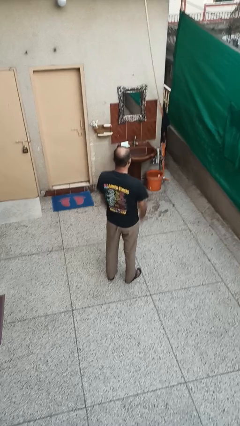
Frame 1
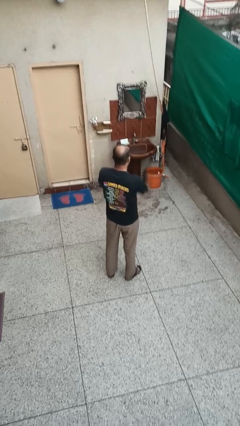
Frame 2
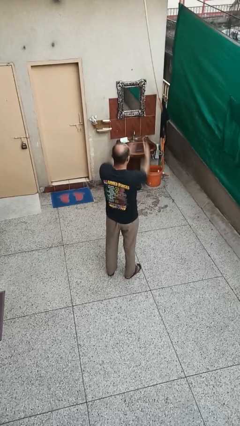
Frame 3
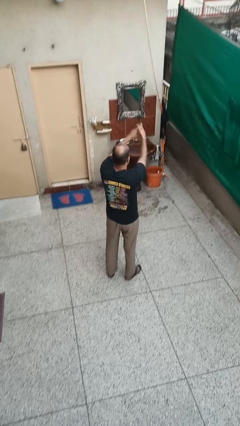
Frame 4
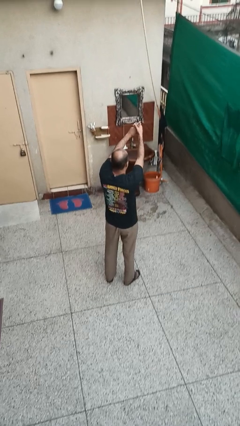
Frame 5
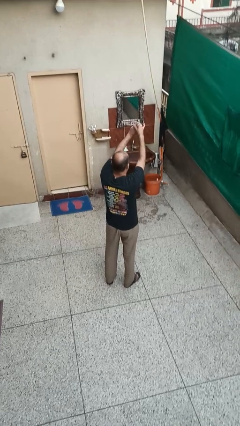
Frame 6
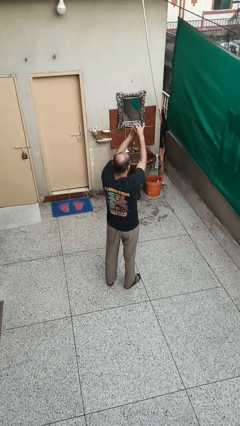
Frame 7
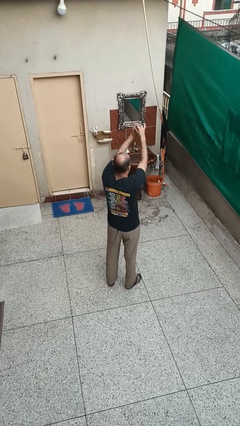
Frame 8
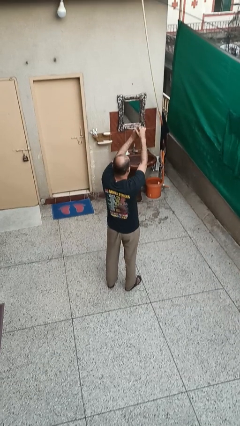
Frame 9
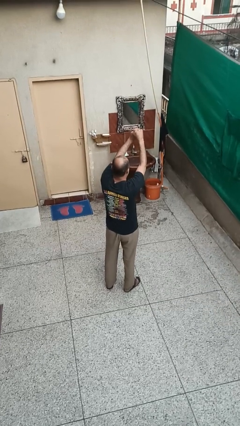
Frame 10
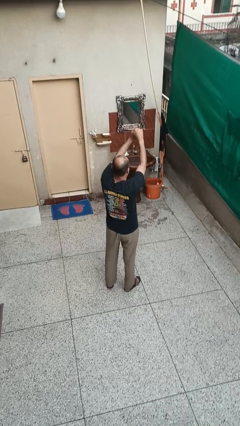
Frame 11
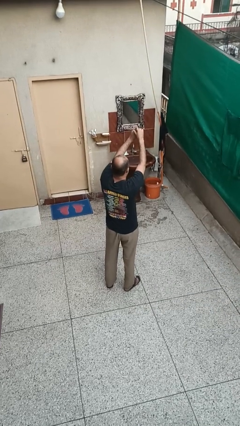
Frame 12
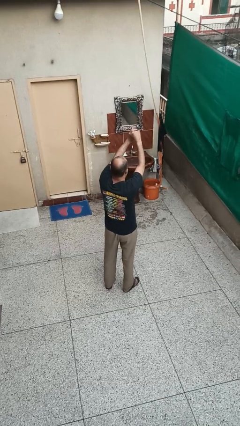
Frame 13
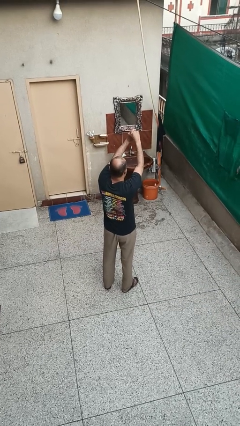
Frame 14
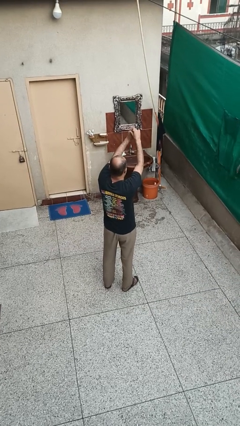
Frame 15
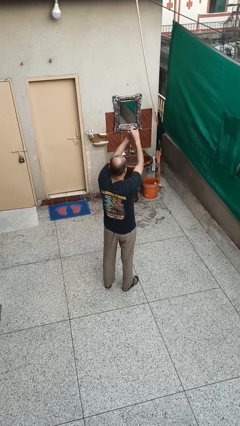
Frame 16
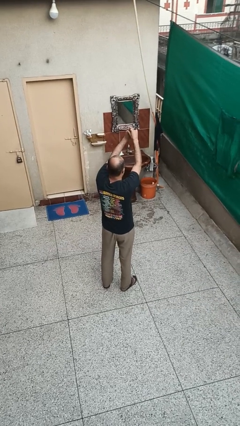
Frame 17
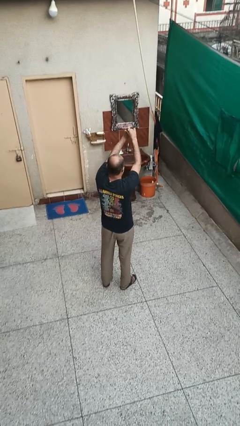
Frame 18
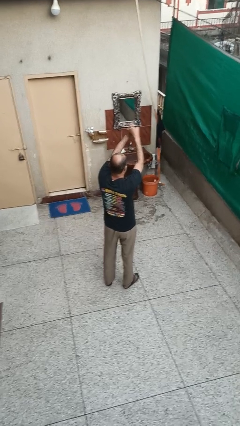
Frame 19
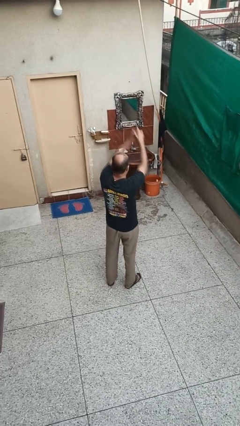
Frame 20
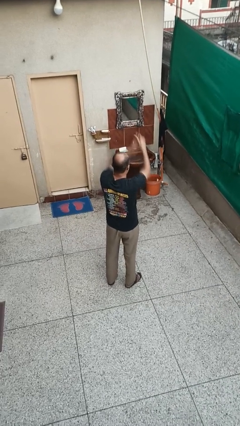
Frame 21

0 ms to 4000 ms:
person cracks knuckles

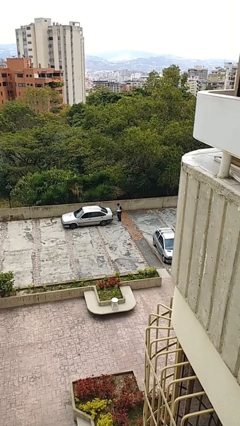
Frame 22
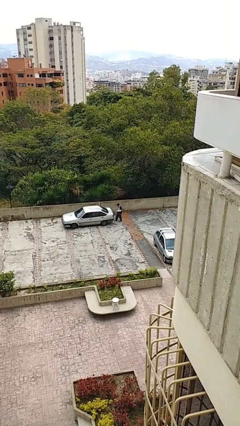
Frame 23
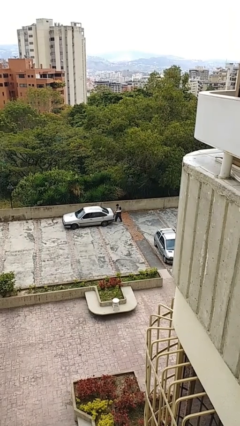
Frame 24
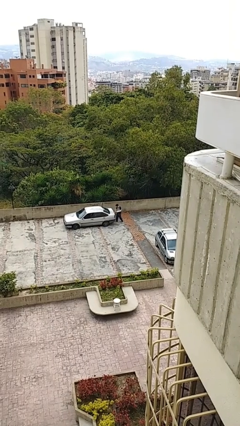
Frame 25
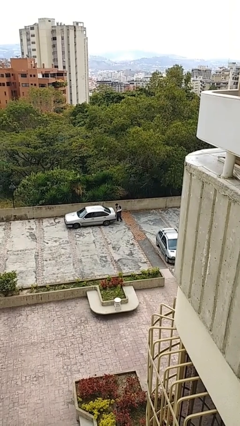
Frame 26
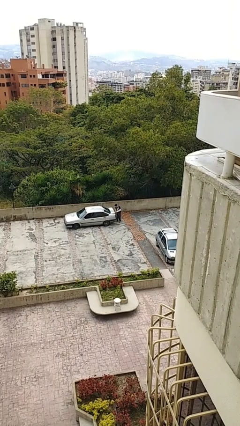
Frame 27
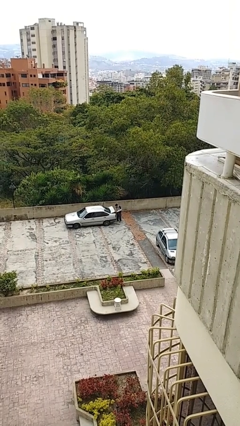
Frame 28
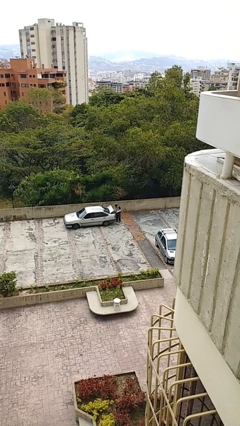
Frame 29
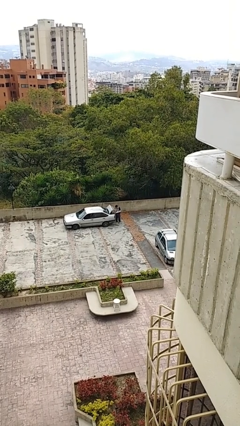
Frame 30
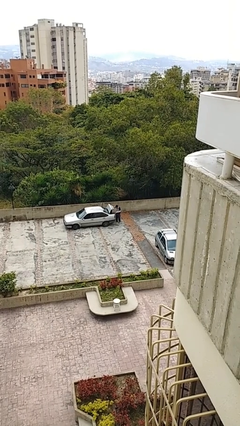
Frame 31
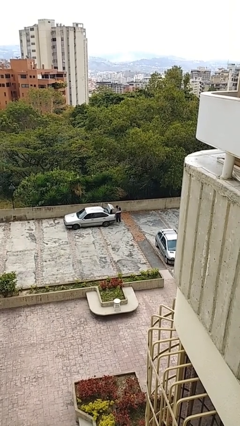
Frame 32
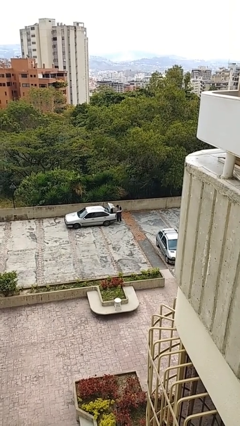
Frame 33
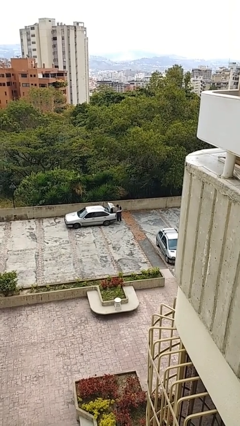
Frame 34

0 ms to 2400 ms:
person opens car trunk

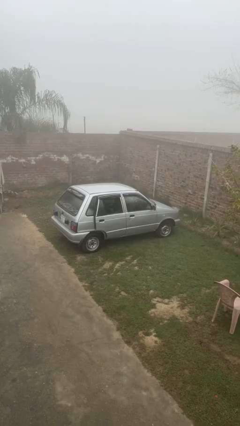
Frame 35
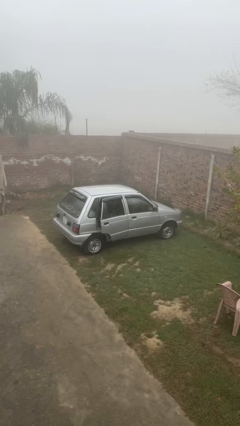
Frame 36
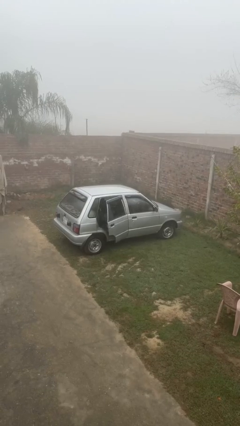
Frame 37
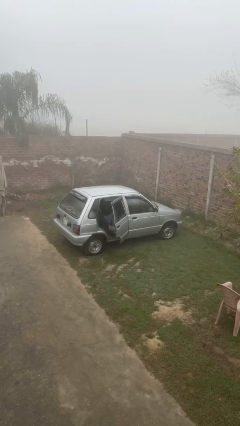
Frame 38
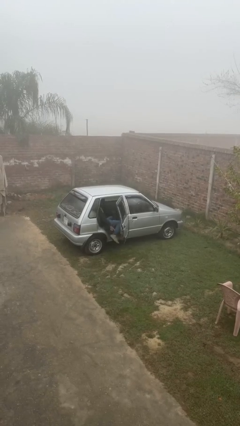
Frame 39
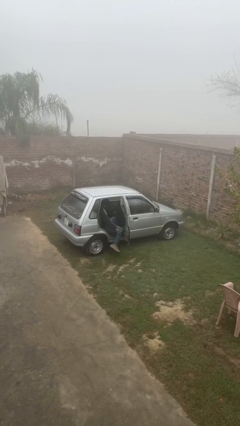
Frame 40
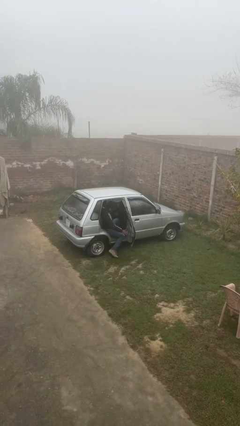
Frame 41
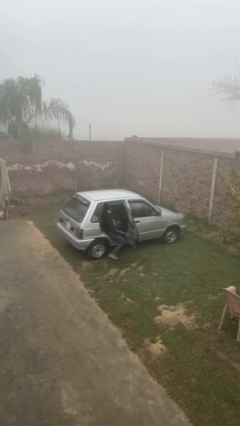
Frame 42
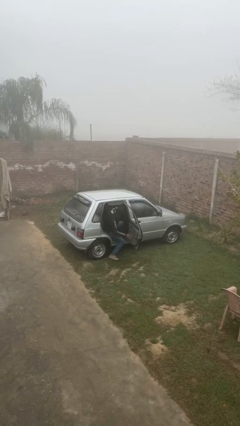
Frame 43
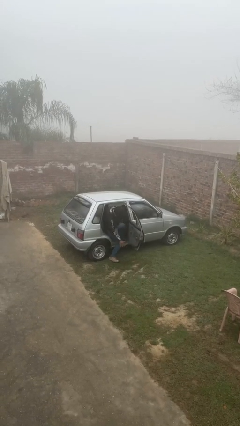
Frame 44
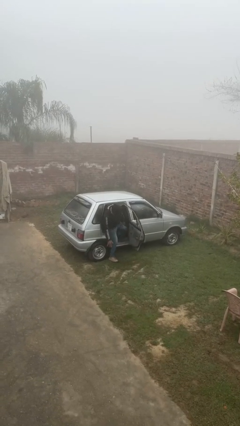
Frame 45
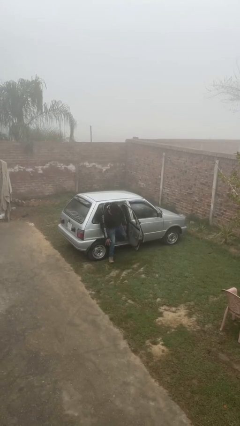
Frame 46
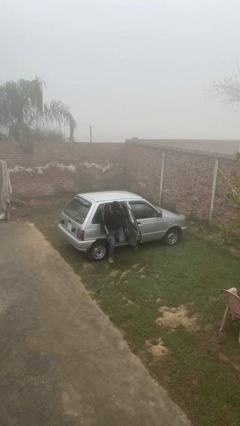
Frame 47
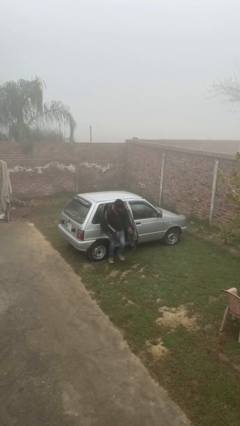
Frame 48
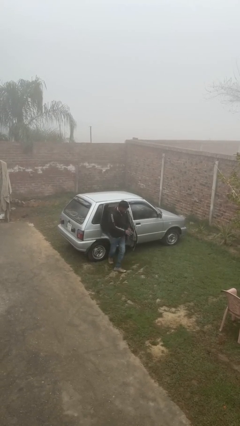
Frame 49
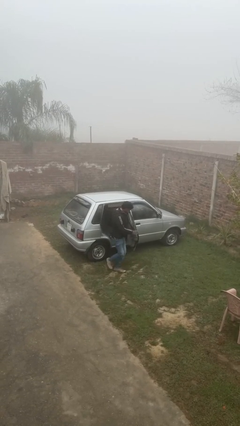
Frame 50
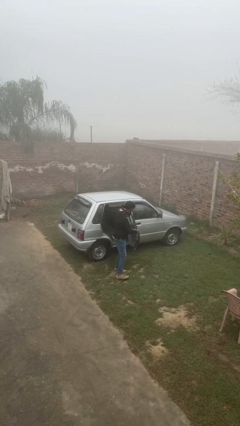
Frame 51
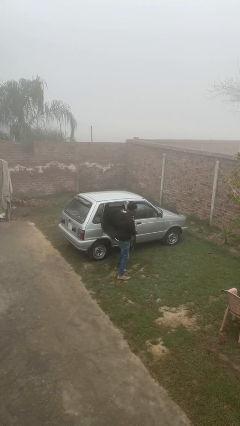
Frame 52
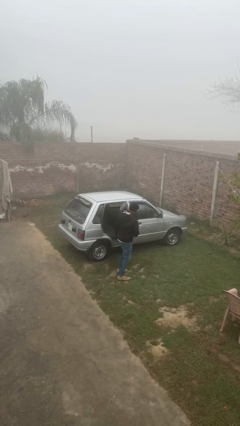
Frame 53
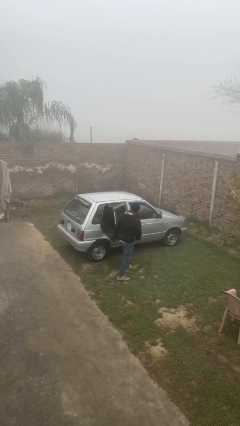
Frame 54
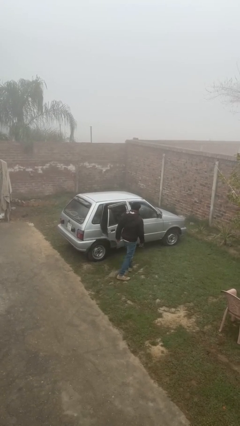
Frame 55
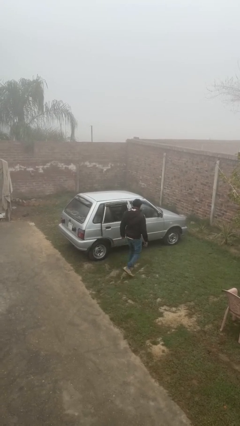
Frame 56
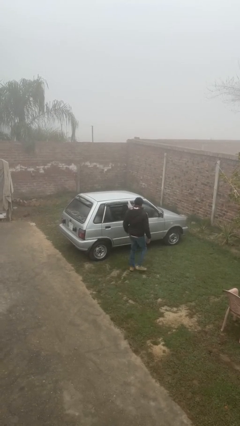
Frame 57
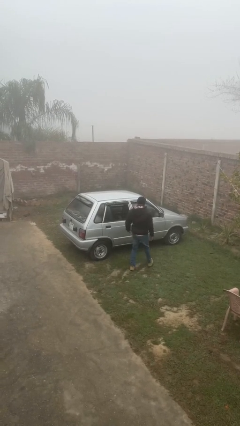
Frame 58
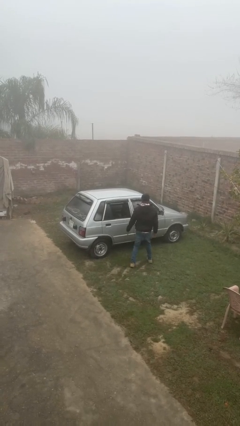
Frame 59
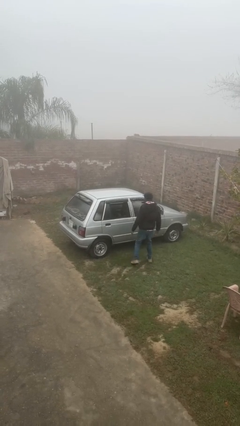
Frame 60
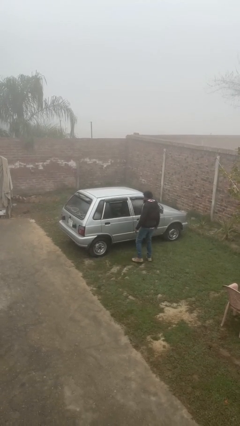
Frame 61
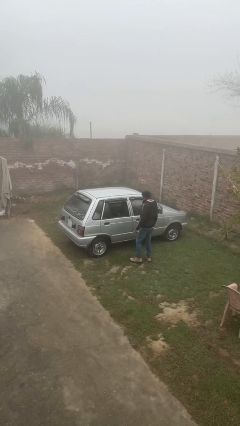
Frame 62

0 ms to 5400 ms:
car drops off person

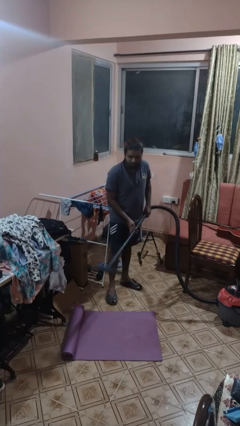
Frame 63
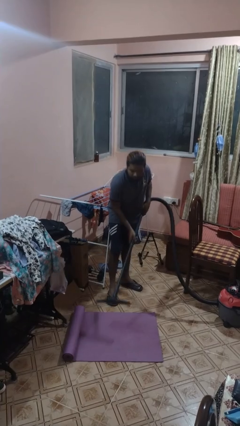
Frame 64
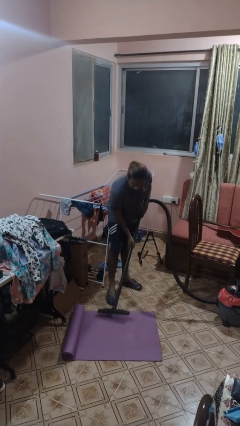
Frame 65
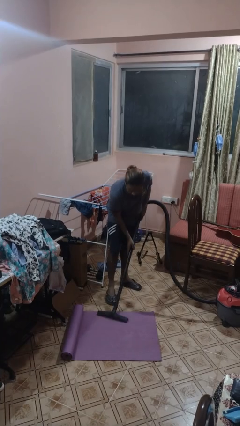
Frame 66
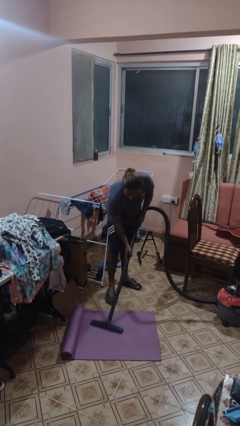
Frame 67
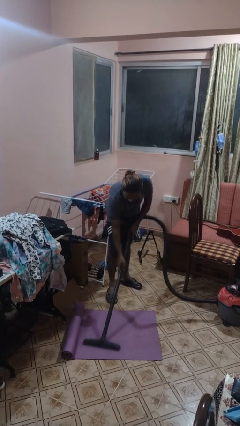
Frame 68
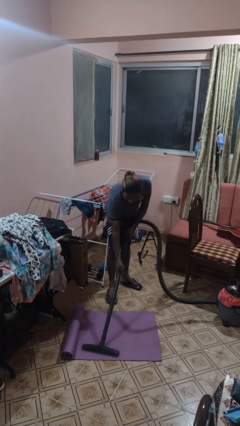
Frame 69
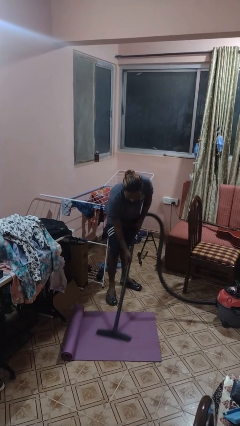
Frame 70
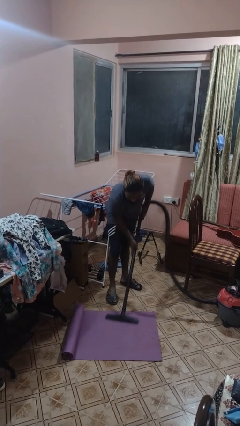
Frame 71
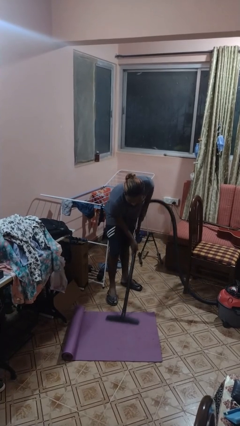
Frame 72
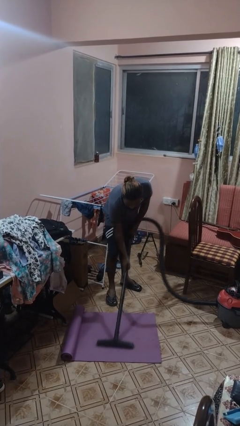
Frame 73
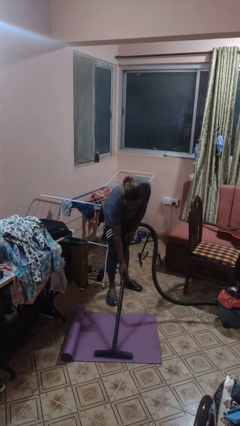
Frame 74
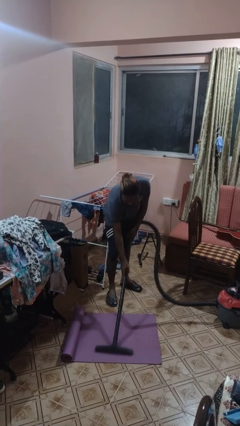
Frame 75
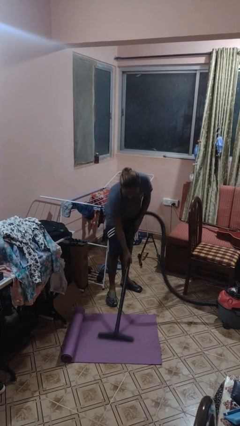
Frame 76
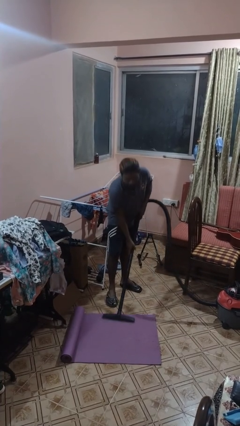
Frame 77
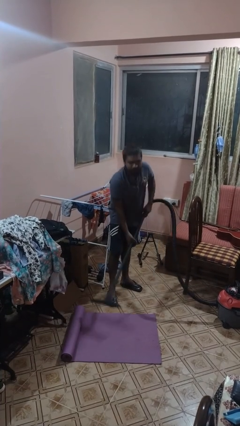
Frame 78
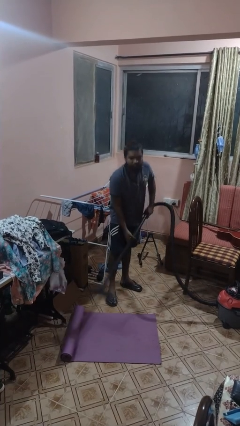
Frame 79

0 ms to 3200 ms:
person vacuums carpet

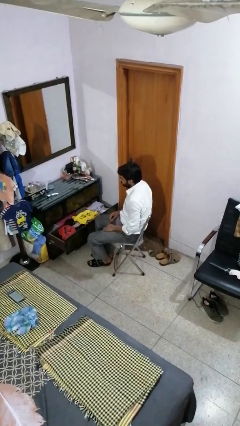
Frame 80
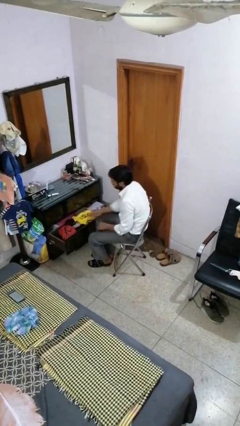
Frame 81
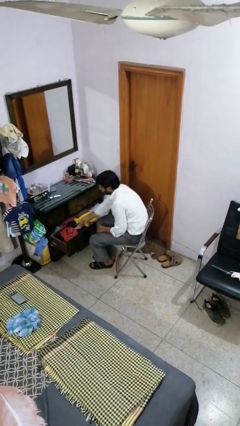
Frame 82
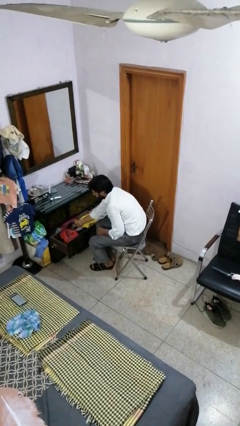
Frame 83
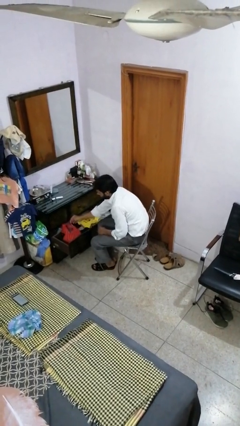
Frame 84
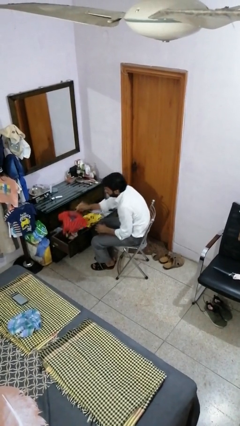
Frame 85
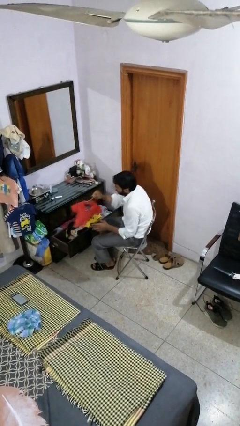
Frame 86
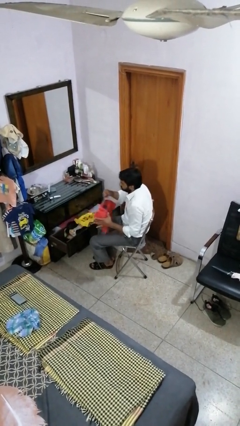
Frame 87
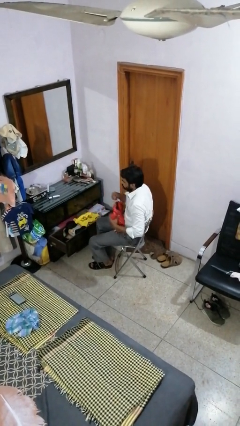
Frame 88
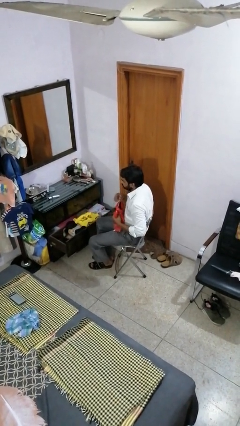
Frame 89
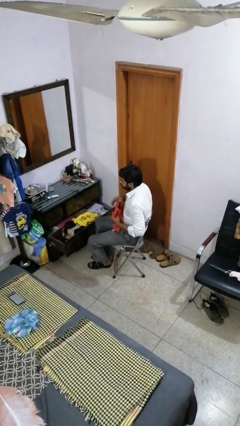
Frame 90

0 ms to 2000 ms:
person takes clothes from dresser

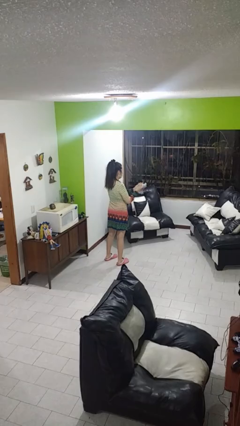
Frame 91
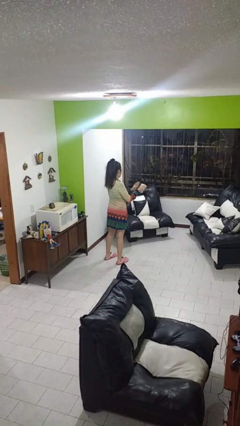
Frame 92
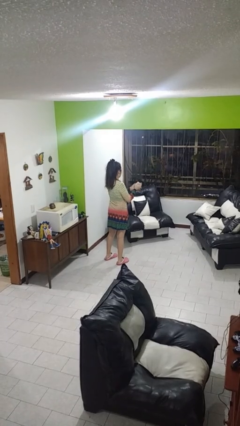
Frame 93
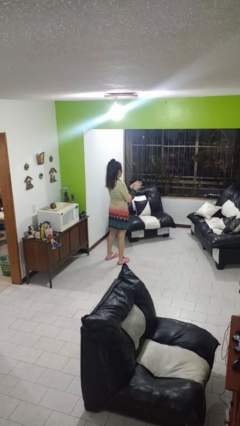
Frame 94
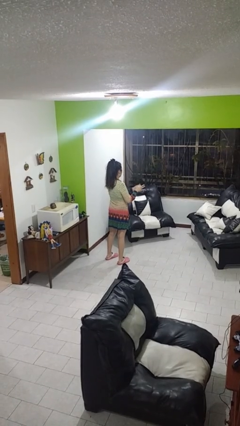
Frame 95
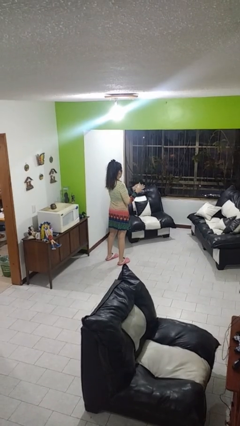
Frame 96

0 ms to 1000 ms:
person crumples paper
